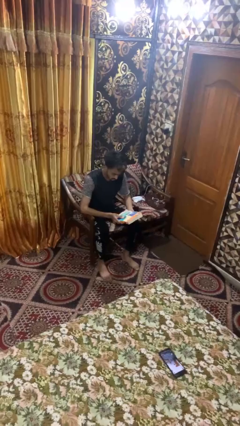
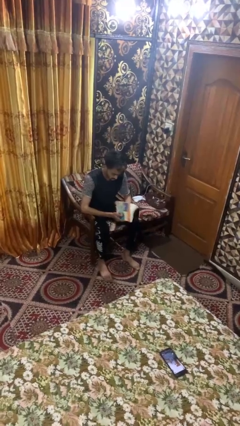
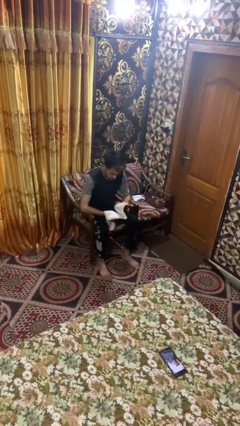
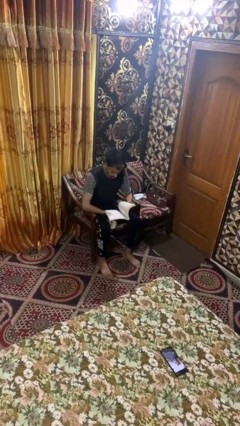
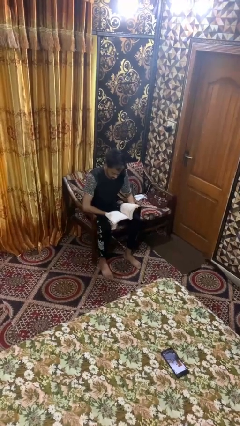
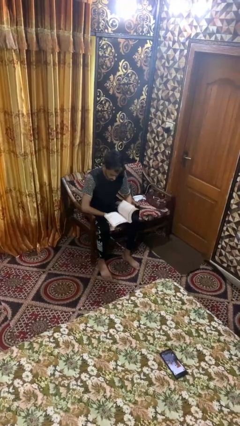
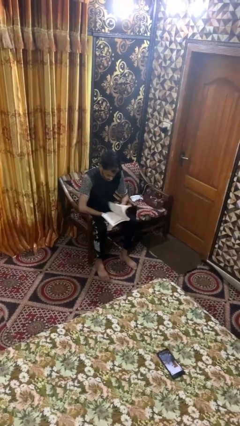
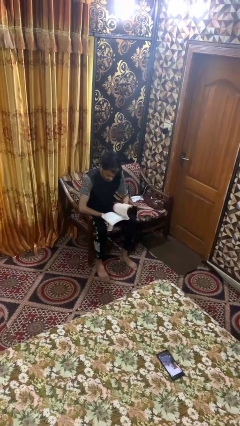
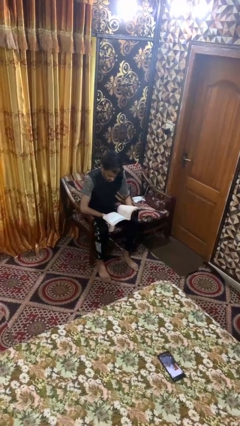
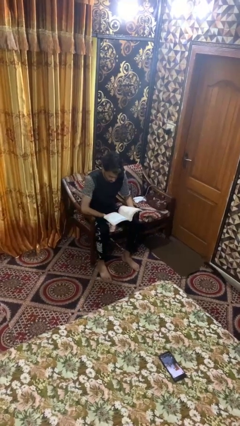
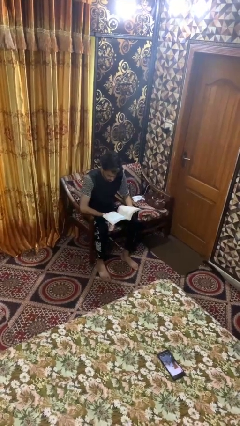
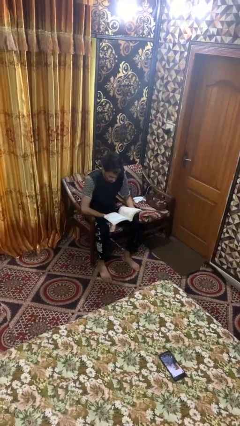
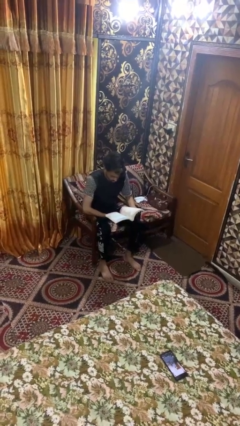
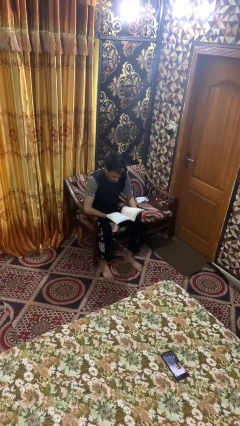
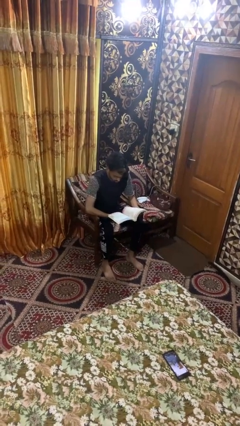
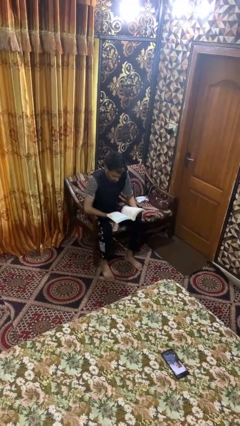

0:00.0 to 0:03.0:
person reads book

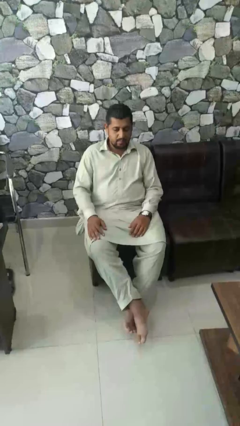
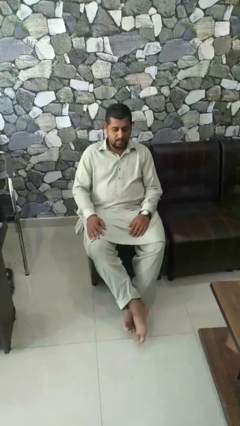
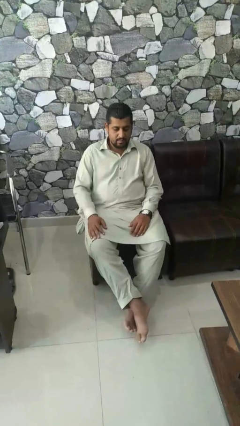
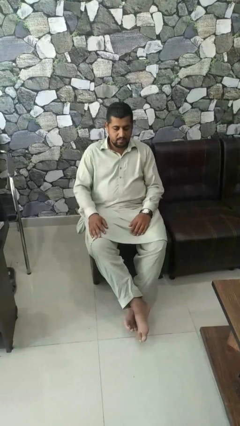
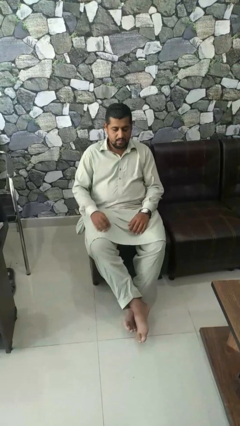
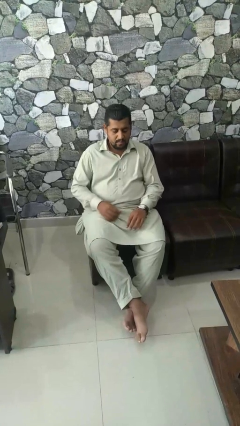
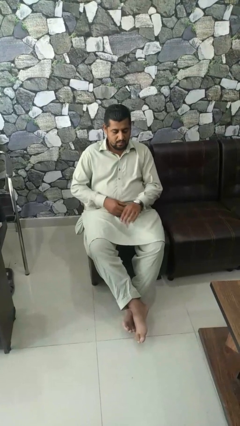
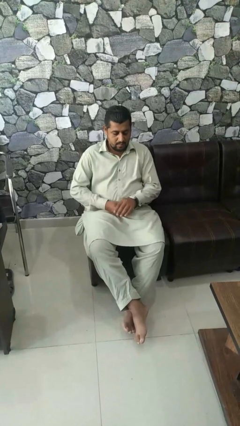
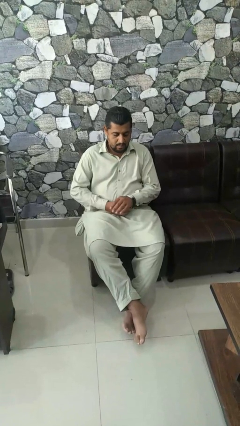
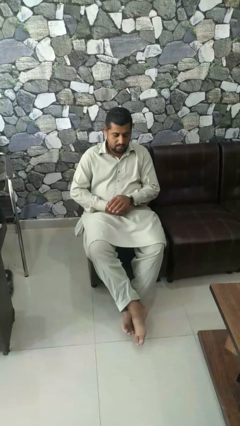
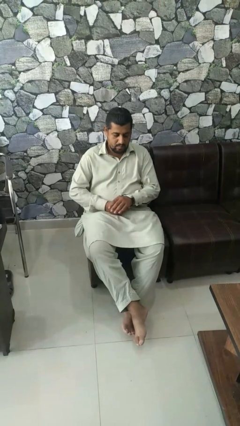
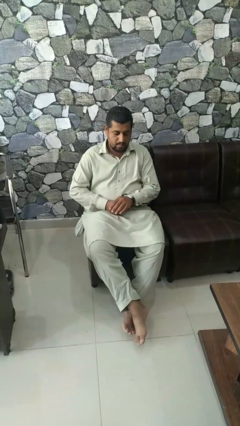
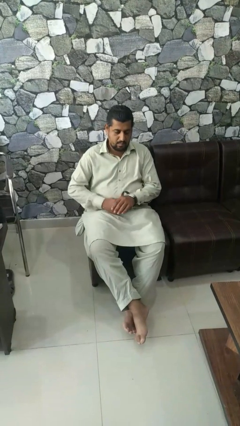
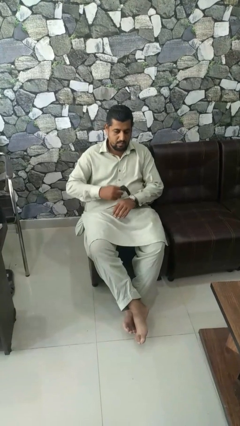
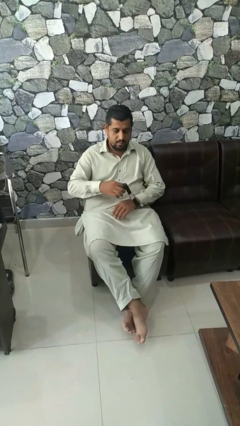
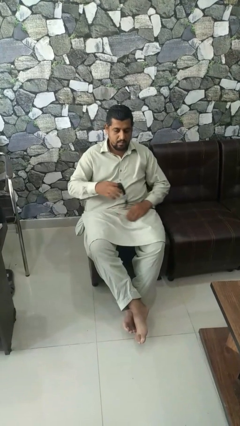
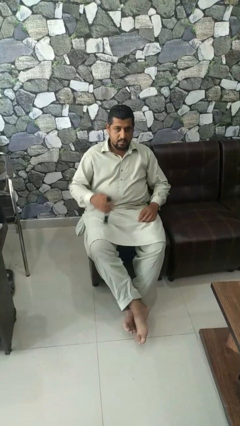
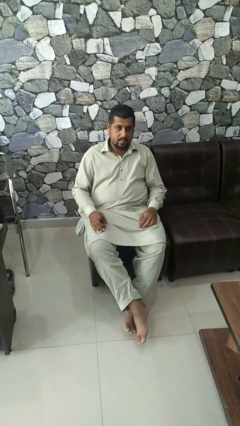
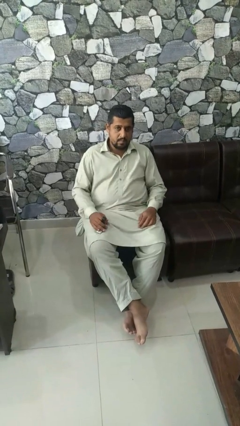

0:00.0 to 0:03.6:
person takes off wristwatch

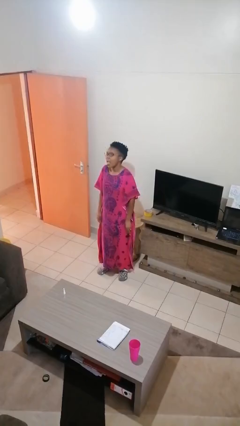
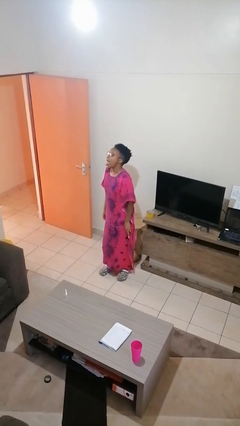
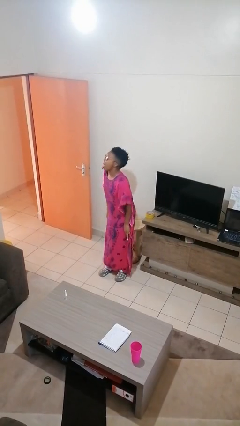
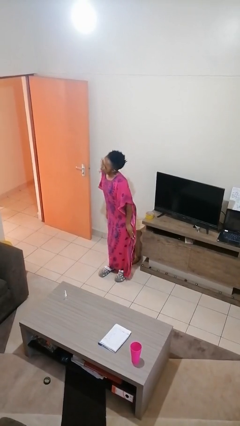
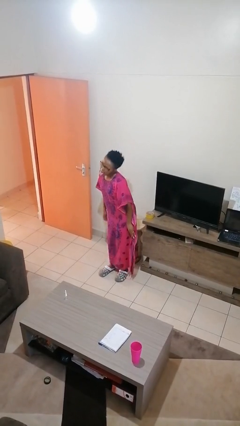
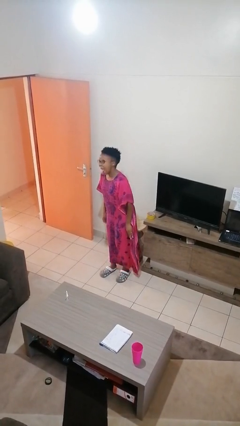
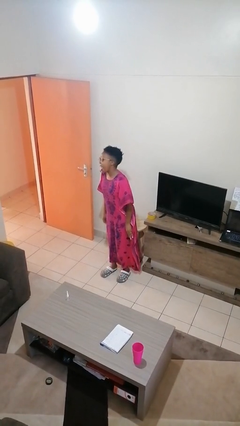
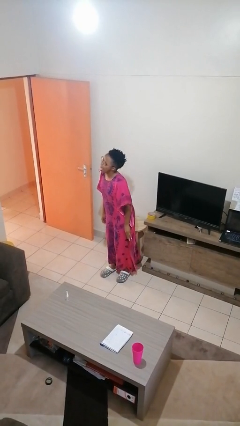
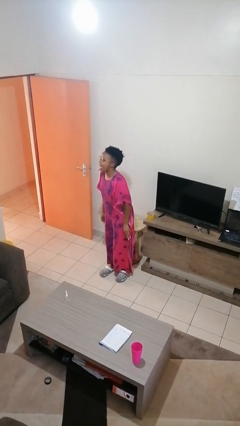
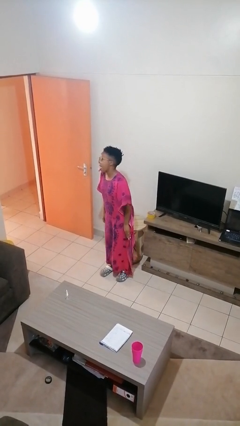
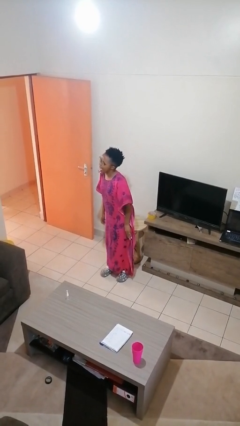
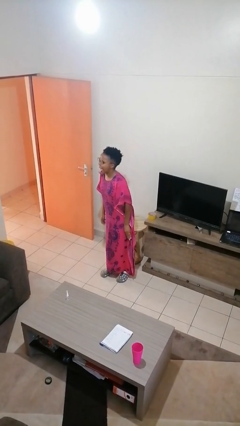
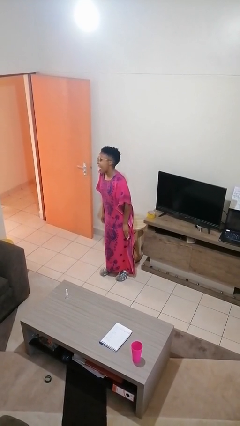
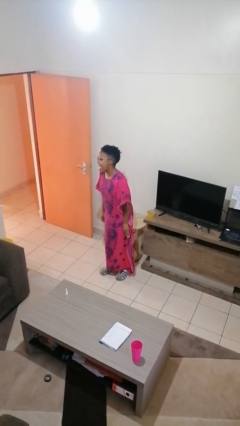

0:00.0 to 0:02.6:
person sticks out tongue

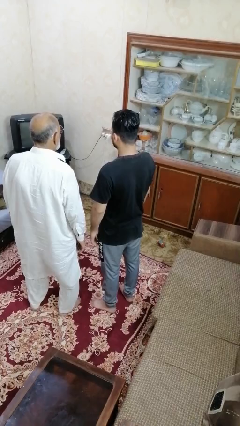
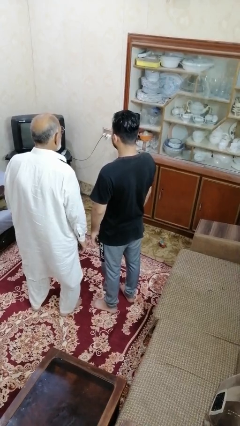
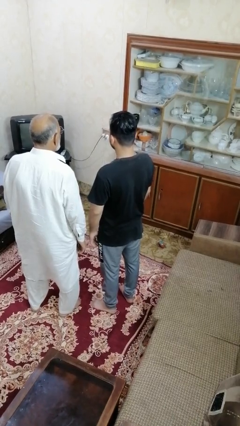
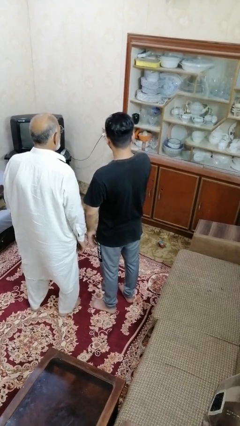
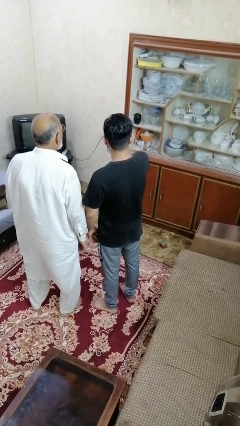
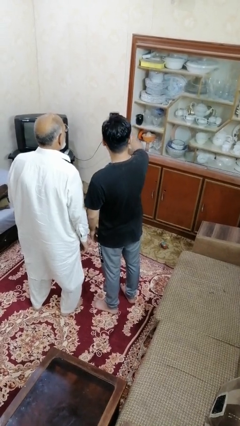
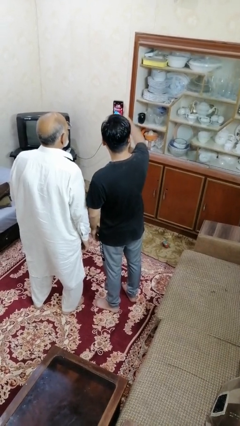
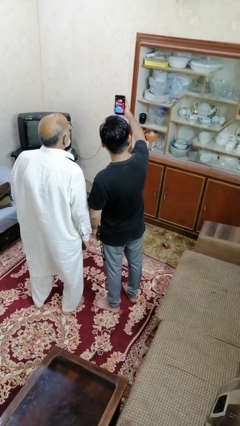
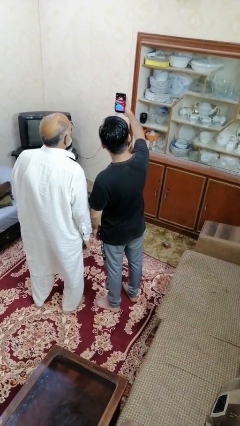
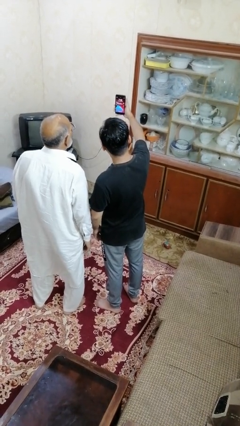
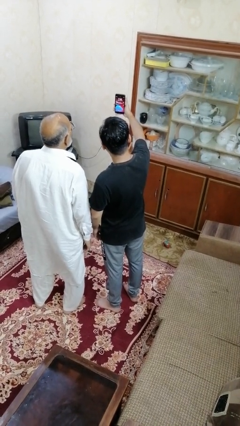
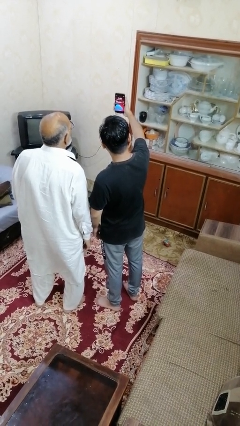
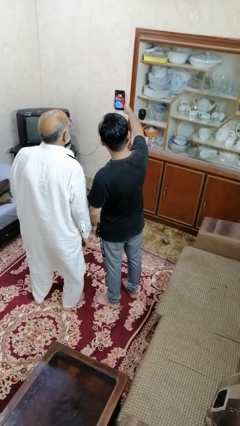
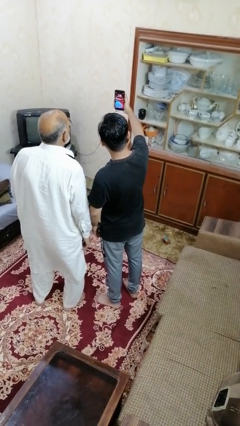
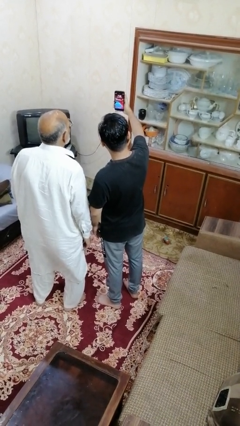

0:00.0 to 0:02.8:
person takes selfie with person

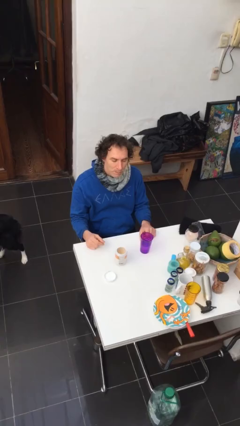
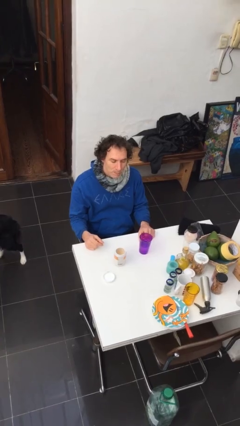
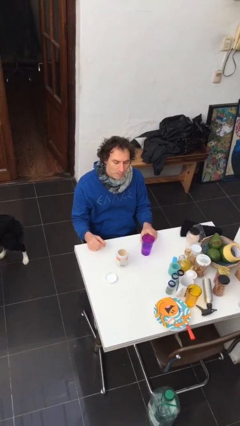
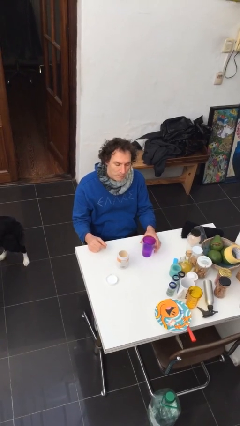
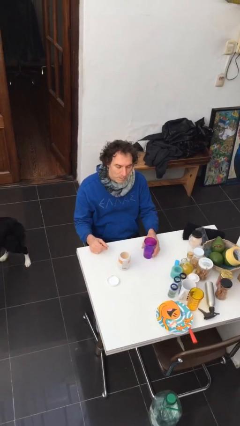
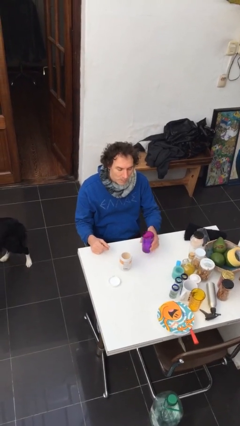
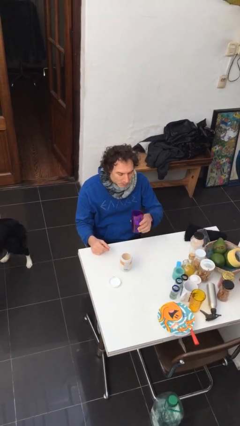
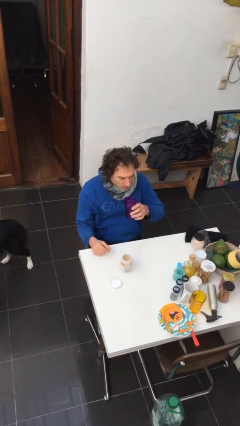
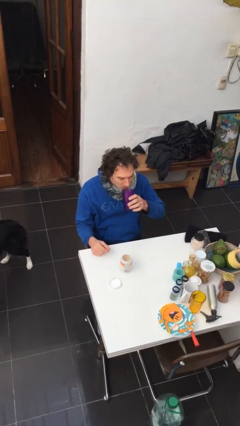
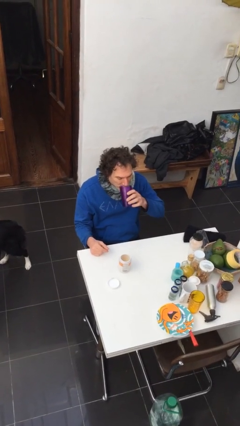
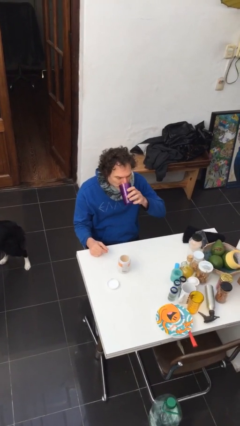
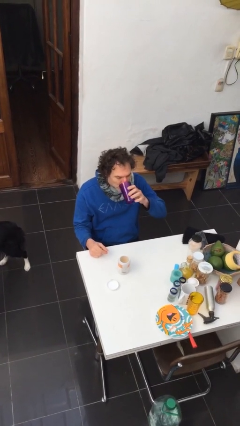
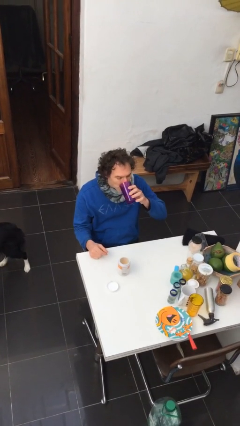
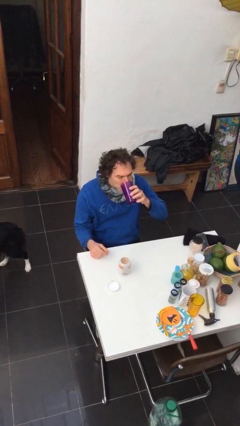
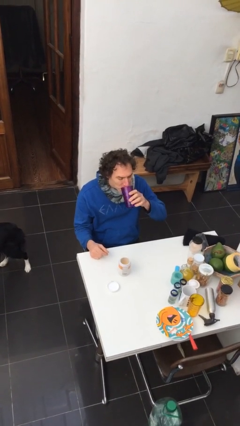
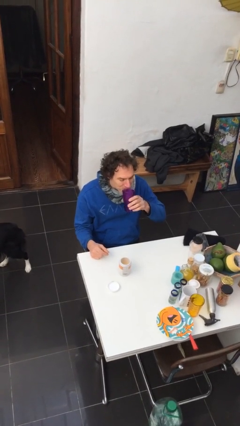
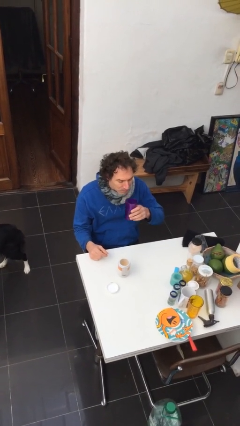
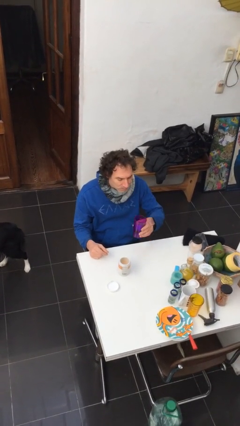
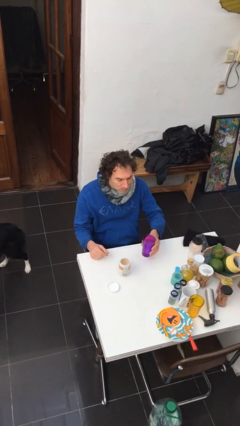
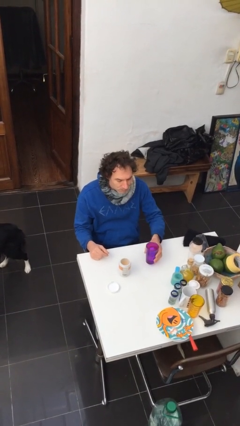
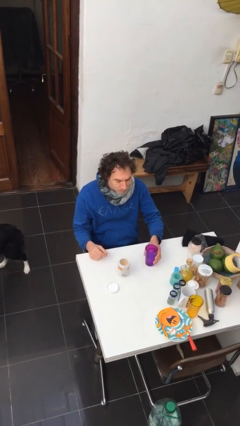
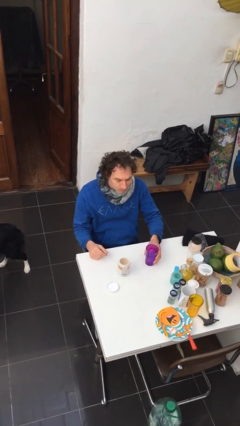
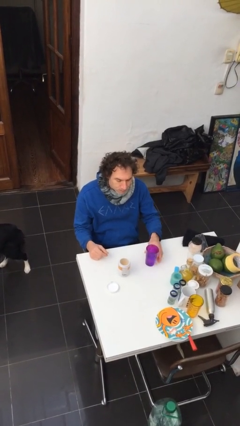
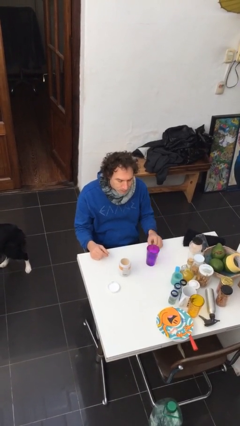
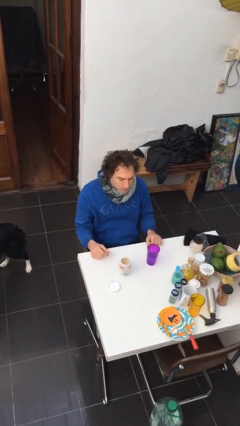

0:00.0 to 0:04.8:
person drinks from cup

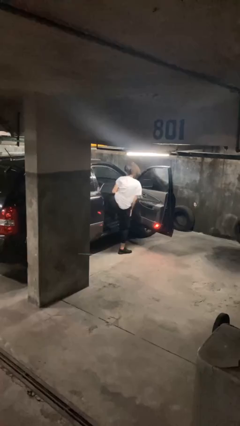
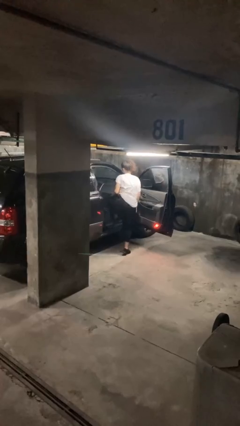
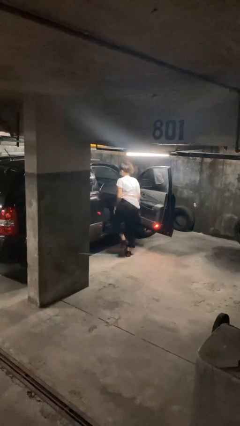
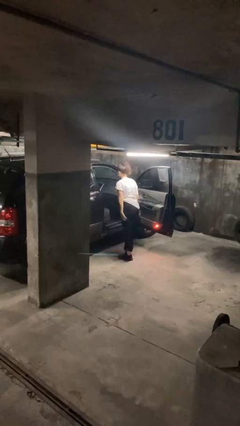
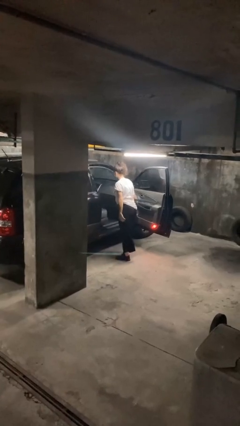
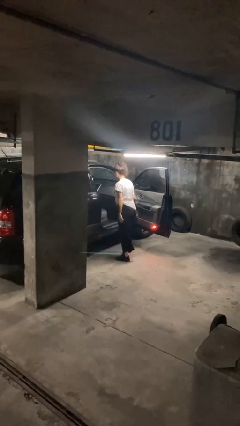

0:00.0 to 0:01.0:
person exits car
